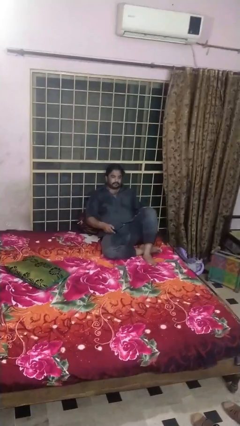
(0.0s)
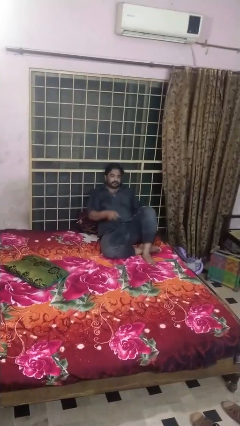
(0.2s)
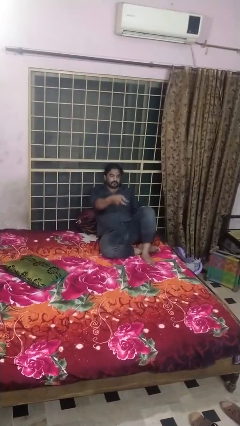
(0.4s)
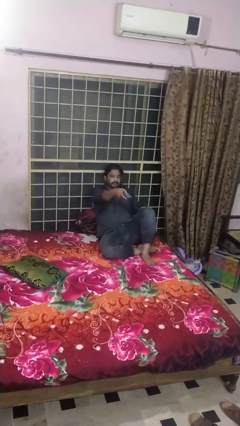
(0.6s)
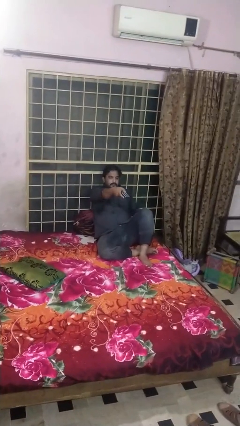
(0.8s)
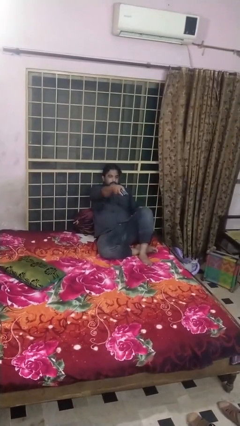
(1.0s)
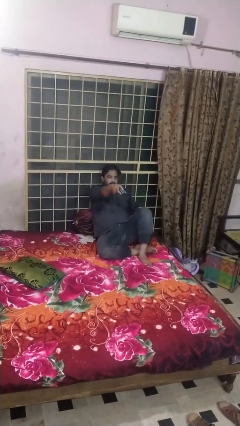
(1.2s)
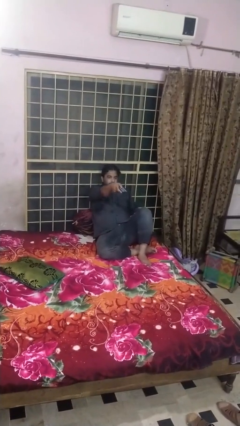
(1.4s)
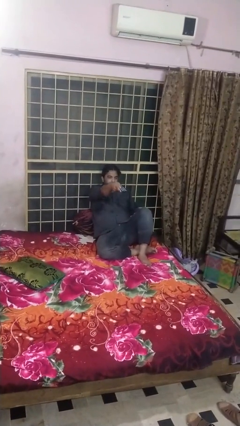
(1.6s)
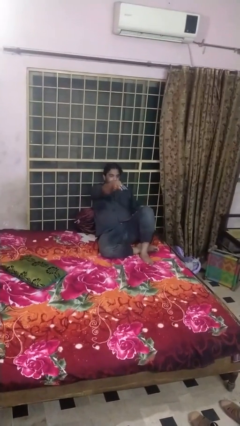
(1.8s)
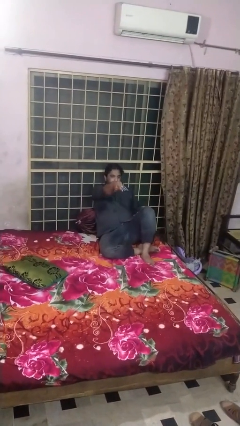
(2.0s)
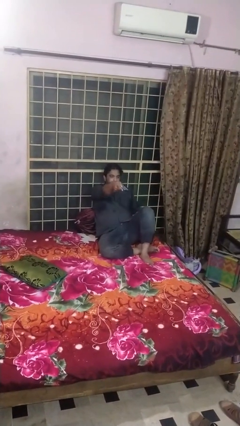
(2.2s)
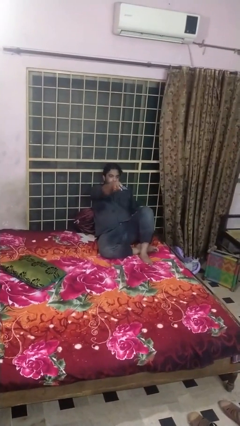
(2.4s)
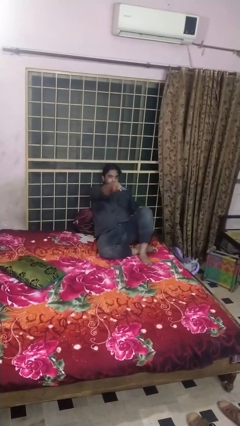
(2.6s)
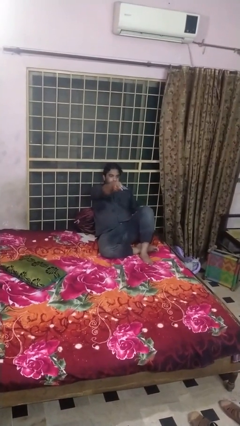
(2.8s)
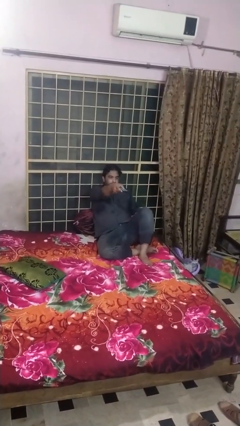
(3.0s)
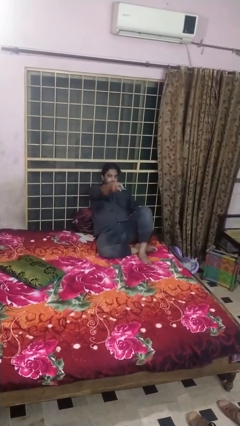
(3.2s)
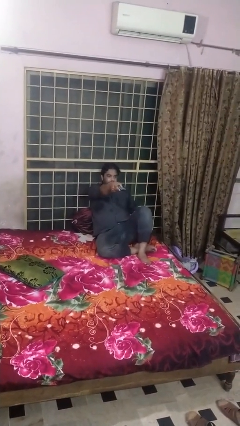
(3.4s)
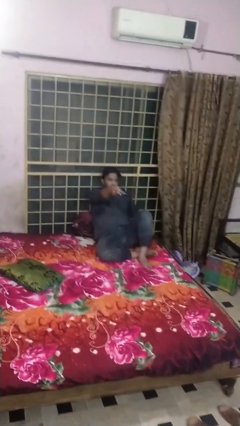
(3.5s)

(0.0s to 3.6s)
person uses television remote

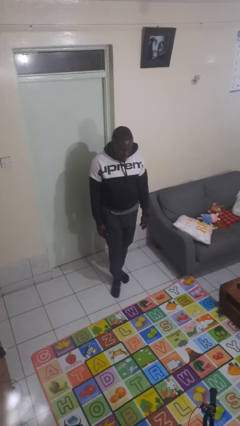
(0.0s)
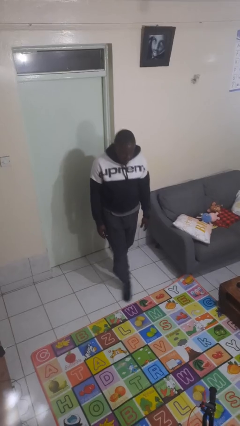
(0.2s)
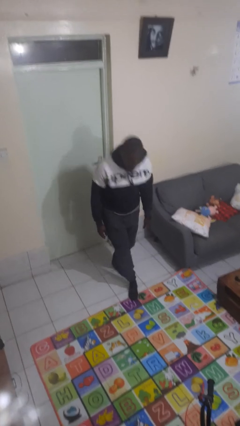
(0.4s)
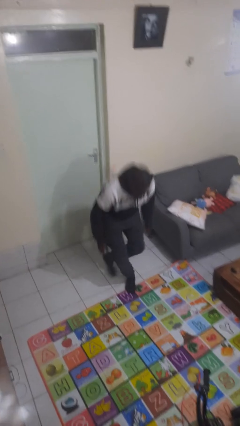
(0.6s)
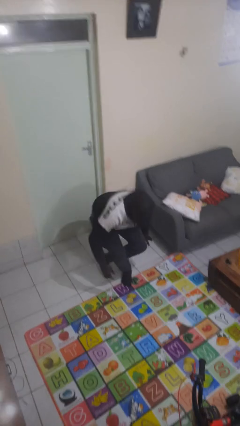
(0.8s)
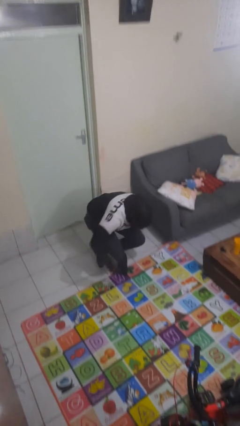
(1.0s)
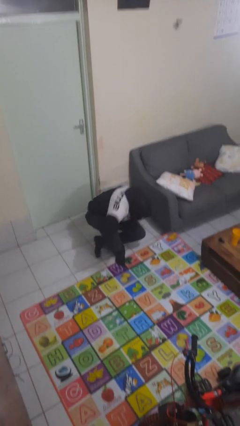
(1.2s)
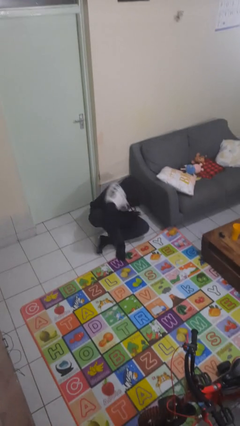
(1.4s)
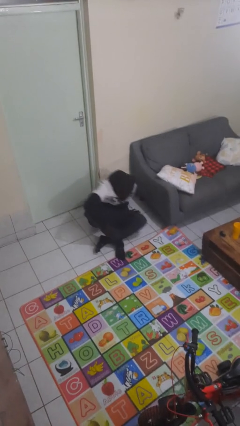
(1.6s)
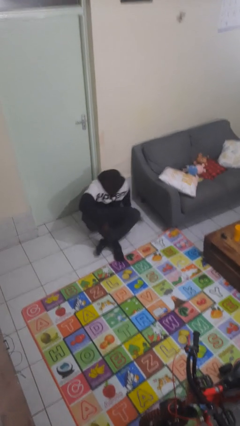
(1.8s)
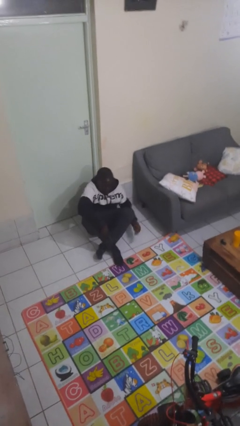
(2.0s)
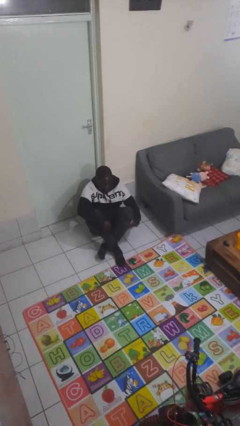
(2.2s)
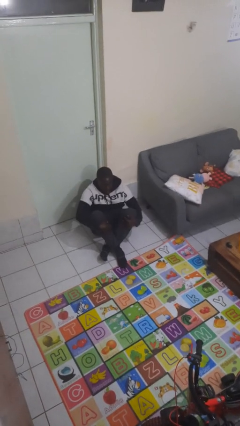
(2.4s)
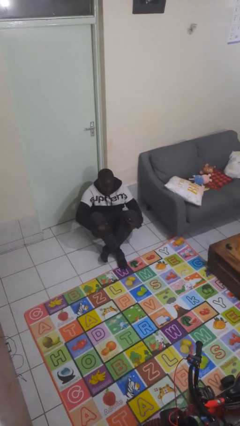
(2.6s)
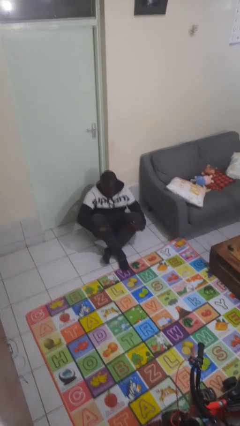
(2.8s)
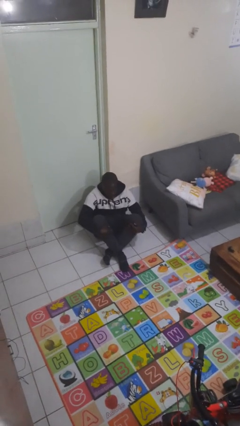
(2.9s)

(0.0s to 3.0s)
person sits crisscross

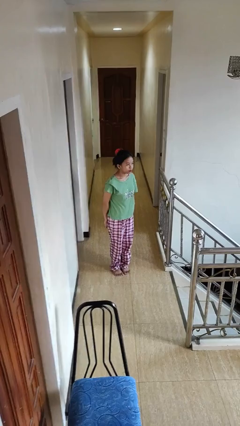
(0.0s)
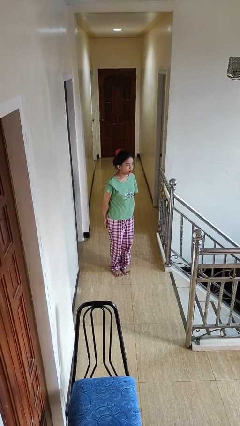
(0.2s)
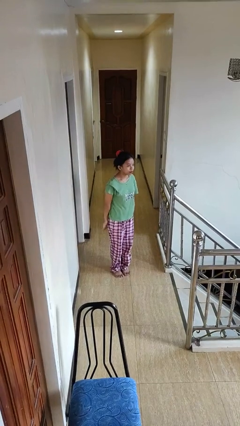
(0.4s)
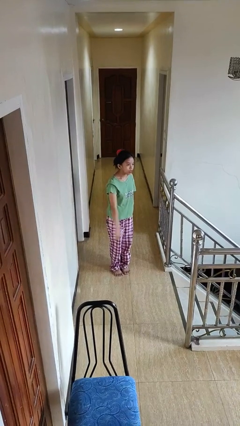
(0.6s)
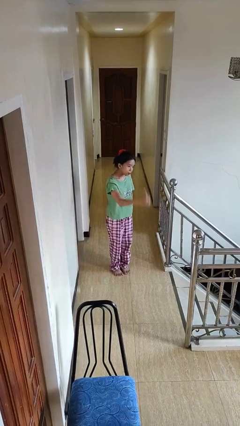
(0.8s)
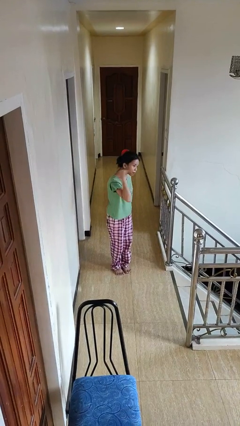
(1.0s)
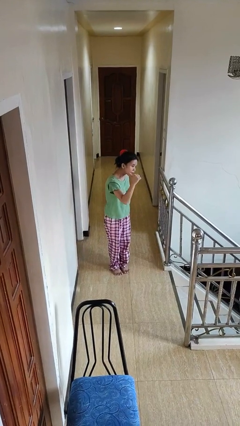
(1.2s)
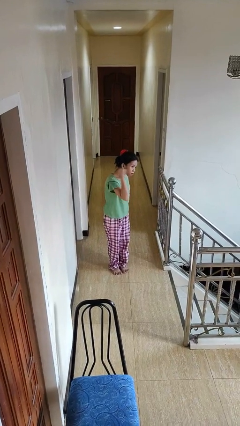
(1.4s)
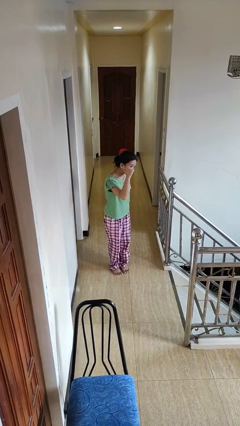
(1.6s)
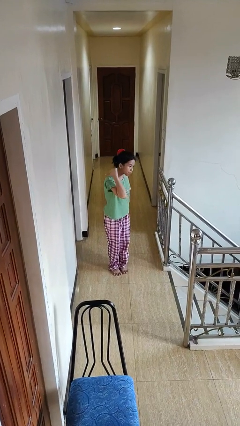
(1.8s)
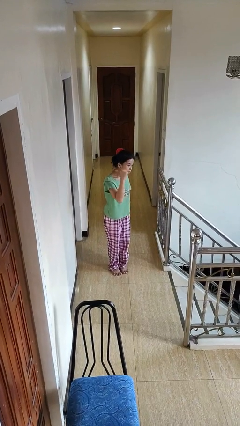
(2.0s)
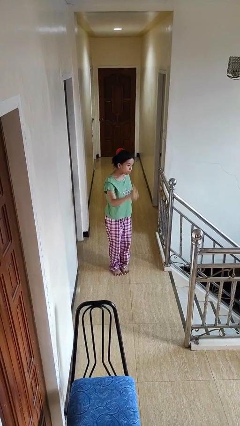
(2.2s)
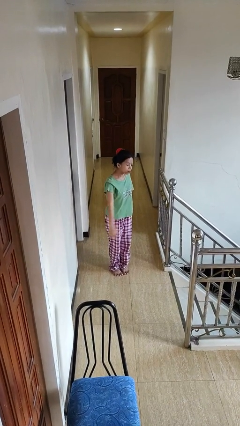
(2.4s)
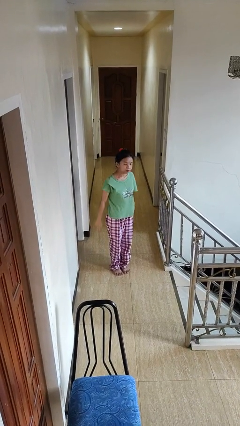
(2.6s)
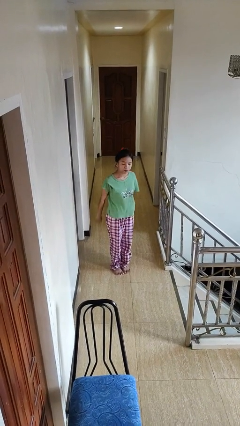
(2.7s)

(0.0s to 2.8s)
person gestures behind me

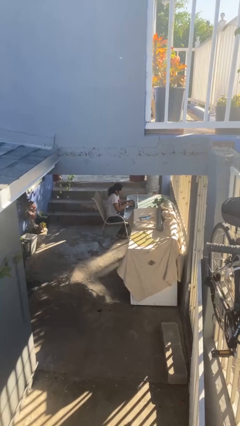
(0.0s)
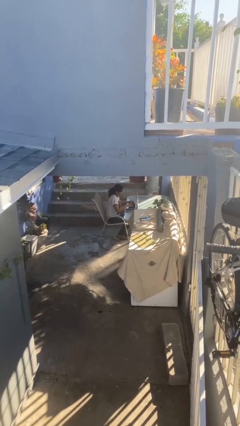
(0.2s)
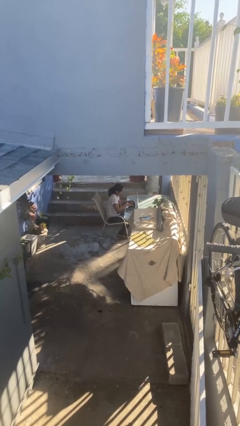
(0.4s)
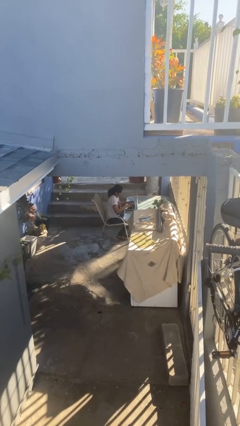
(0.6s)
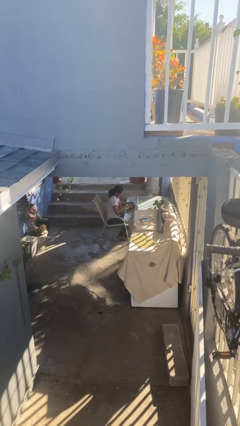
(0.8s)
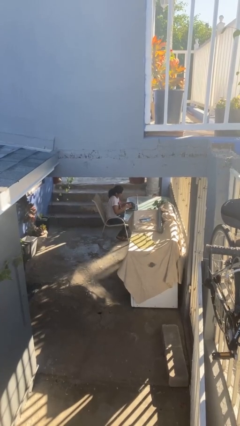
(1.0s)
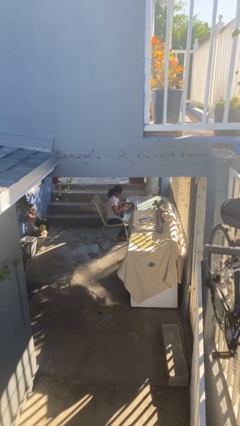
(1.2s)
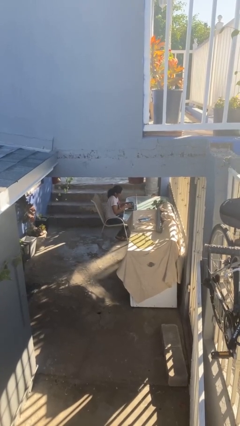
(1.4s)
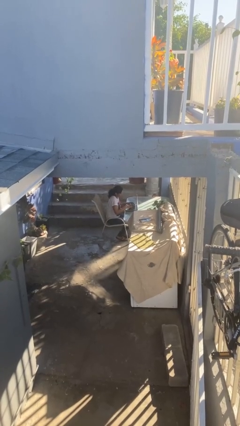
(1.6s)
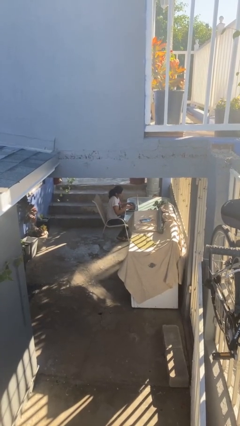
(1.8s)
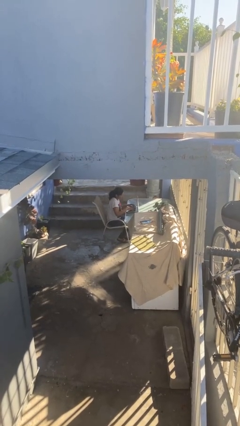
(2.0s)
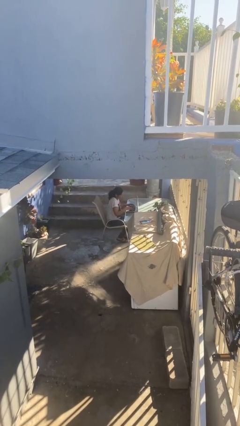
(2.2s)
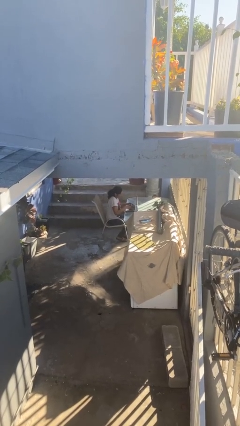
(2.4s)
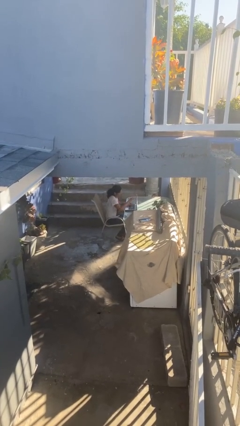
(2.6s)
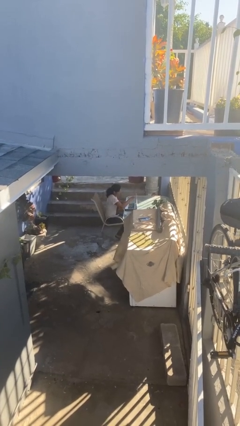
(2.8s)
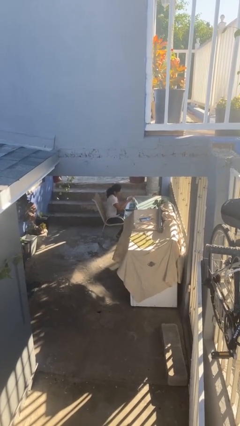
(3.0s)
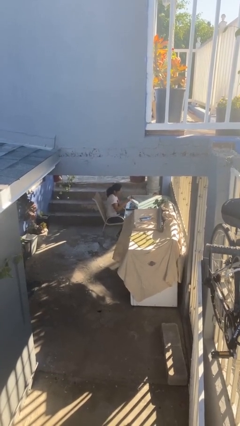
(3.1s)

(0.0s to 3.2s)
person interacts with laptop

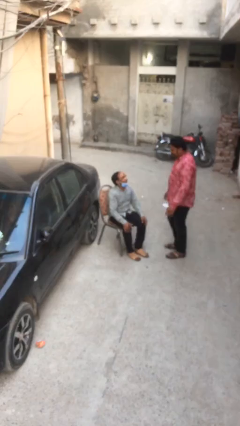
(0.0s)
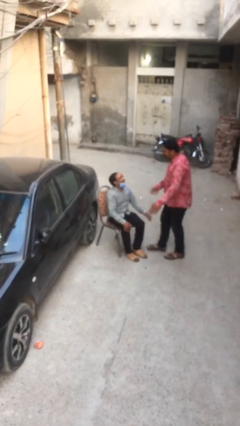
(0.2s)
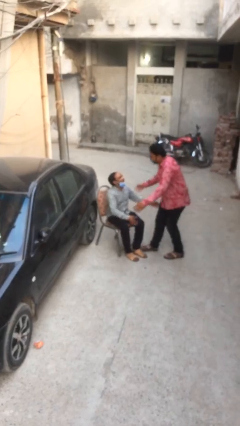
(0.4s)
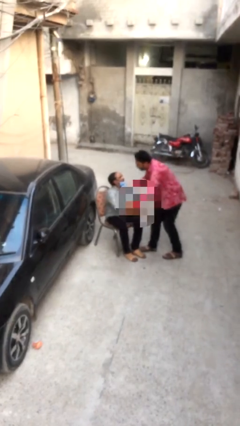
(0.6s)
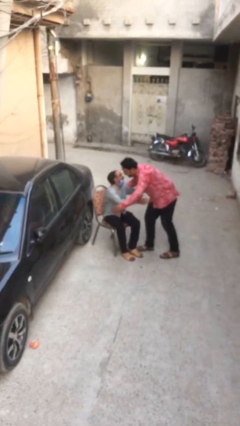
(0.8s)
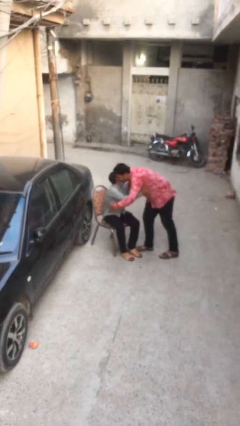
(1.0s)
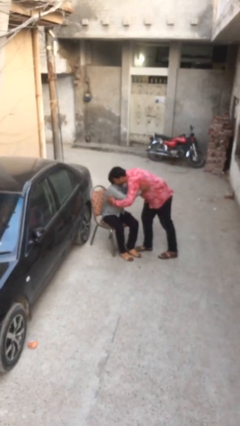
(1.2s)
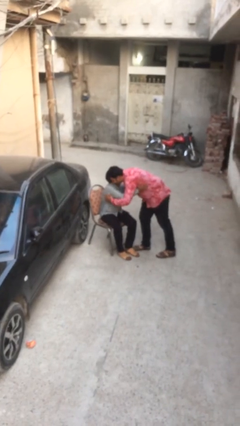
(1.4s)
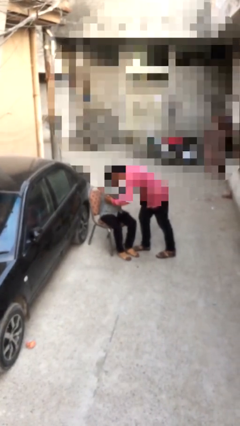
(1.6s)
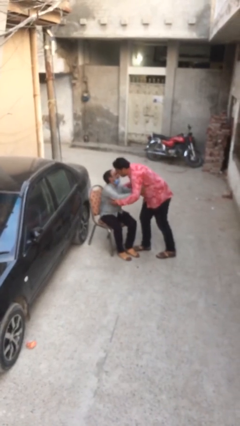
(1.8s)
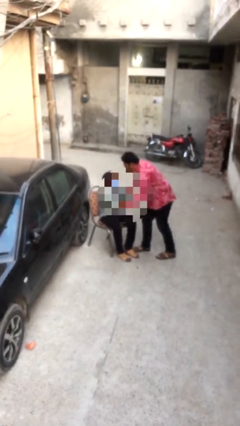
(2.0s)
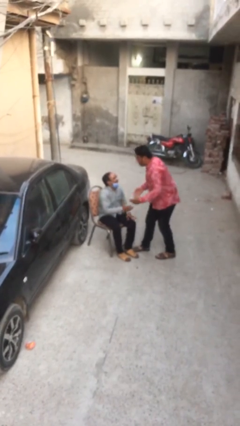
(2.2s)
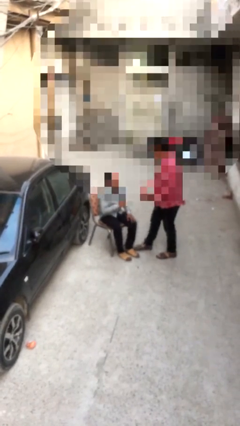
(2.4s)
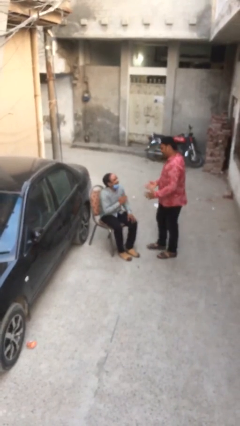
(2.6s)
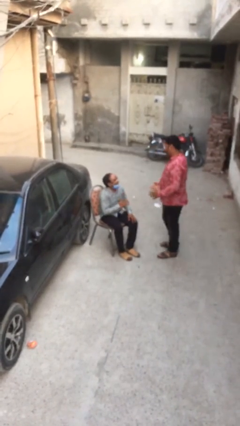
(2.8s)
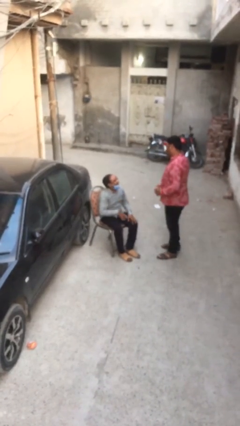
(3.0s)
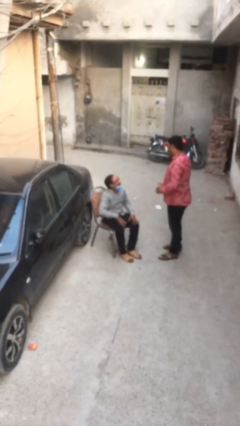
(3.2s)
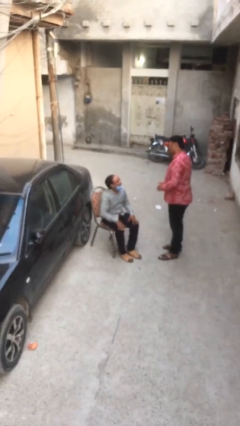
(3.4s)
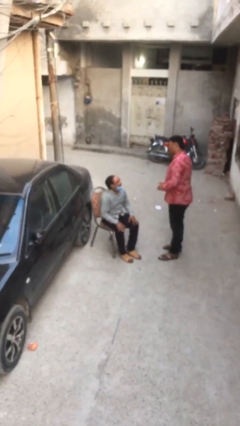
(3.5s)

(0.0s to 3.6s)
person embraces person

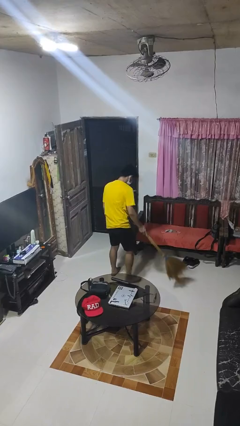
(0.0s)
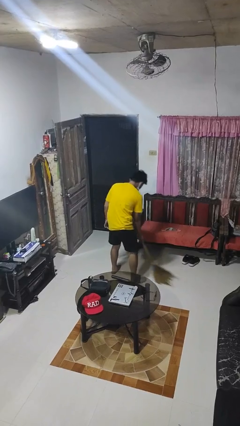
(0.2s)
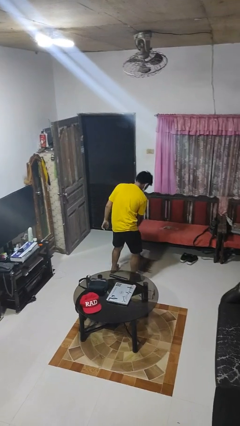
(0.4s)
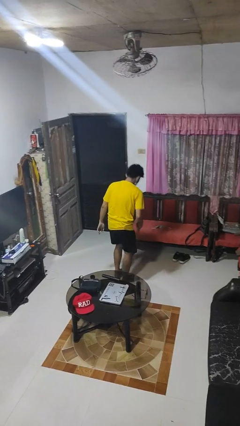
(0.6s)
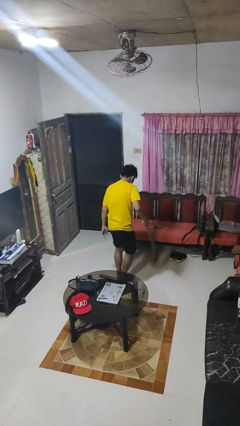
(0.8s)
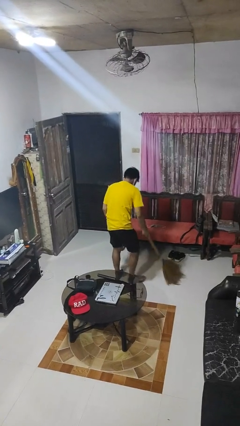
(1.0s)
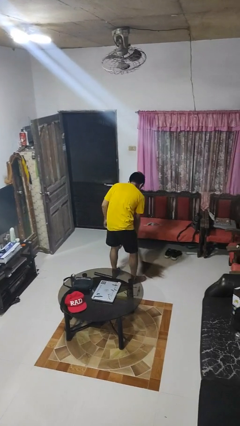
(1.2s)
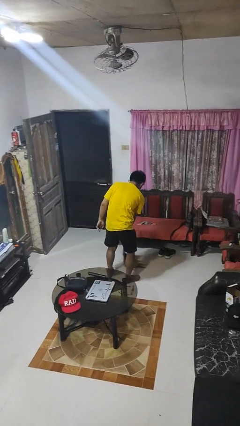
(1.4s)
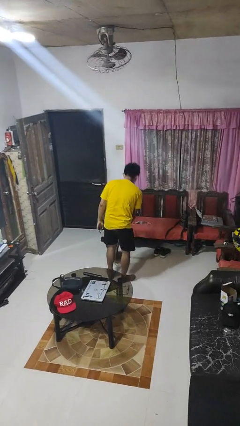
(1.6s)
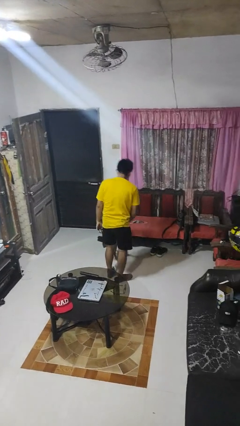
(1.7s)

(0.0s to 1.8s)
person sweeps floor
